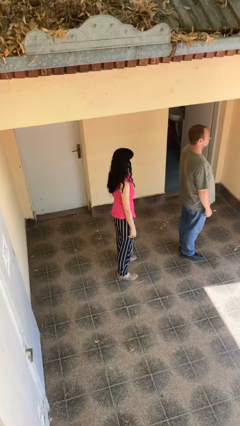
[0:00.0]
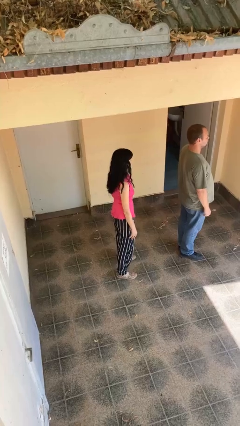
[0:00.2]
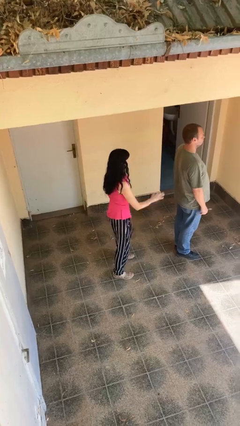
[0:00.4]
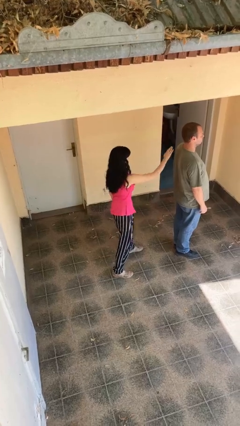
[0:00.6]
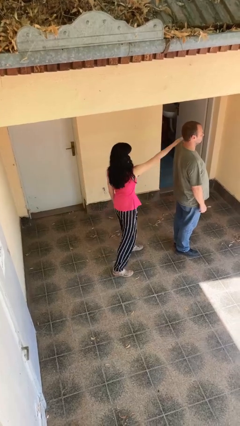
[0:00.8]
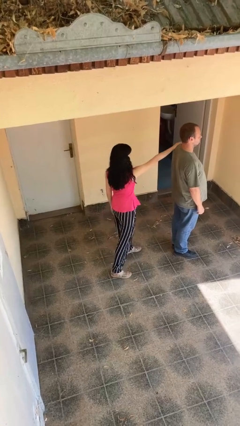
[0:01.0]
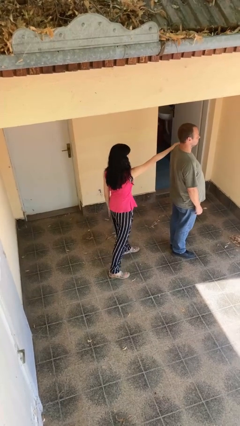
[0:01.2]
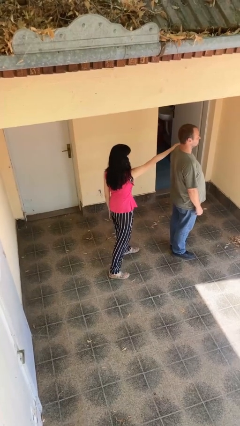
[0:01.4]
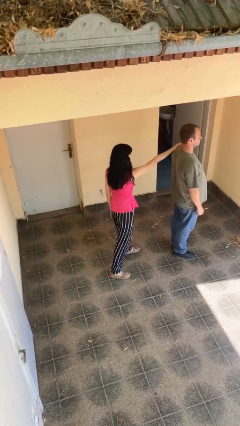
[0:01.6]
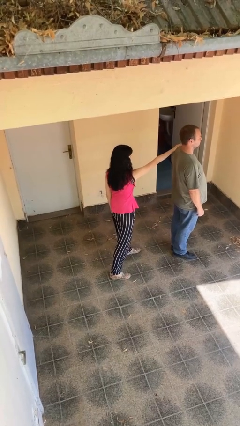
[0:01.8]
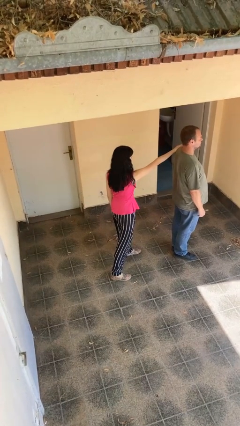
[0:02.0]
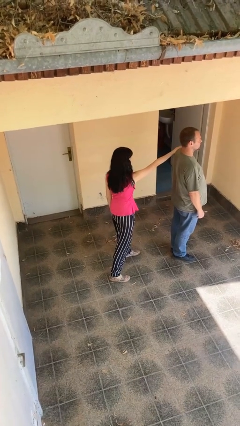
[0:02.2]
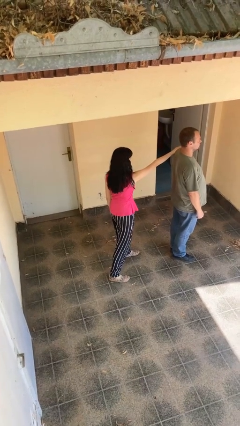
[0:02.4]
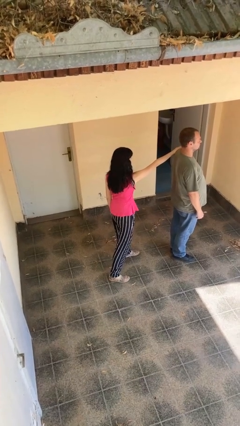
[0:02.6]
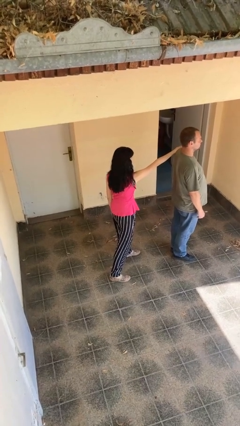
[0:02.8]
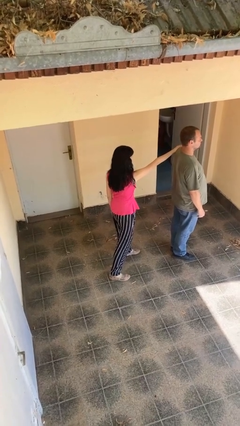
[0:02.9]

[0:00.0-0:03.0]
person grabs person by shoulder

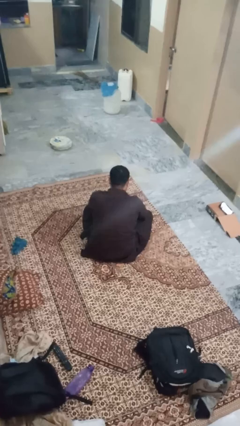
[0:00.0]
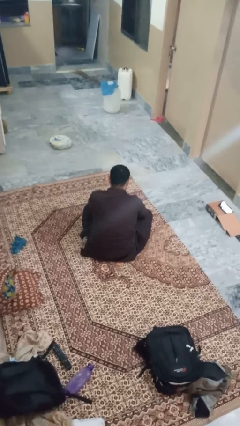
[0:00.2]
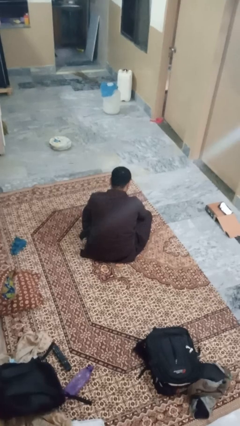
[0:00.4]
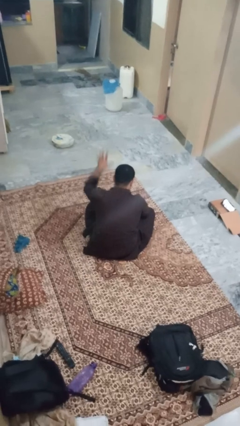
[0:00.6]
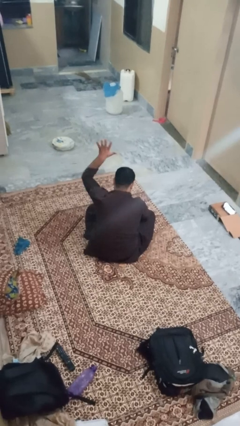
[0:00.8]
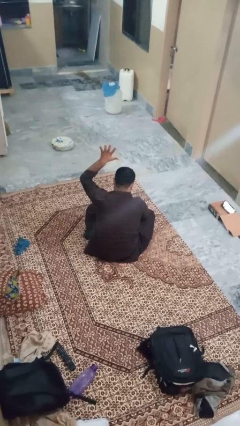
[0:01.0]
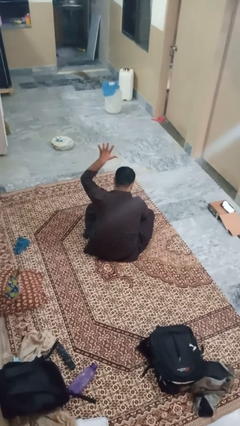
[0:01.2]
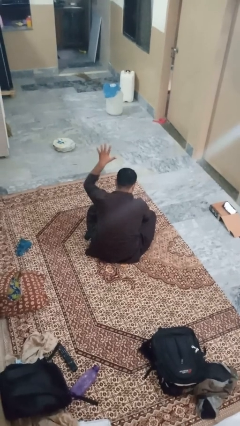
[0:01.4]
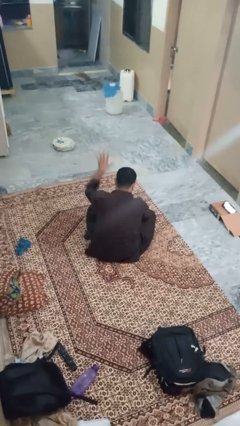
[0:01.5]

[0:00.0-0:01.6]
person gestures number five

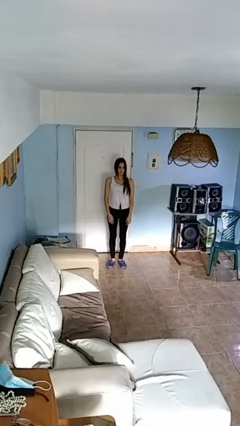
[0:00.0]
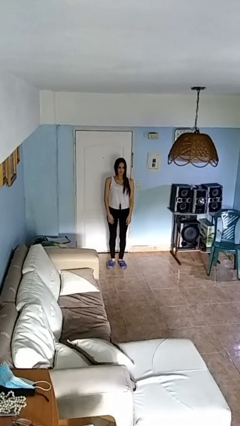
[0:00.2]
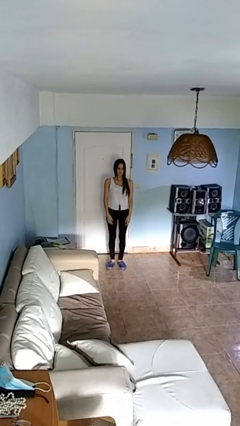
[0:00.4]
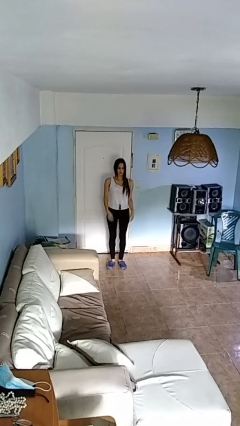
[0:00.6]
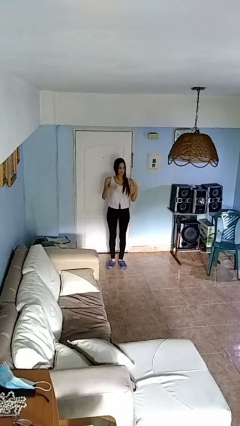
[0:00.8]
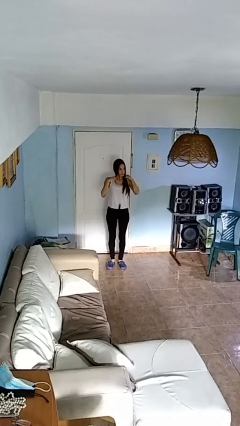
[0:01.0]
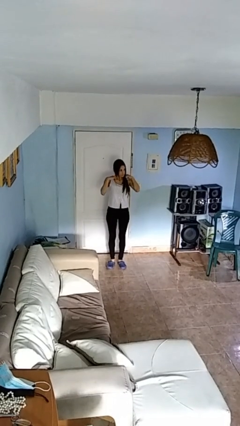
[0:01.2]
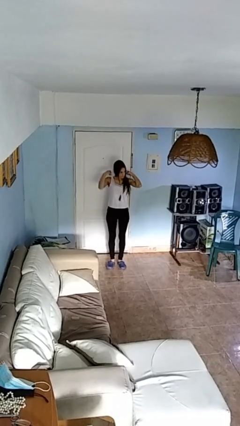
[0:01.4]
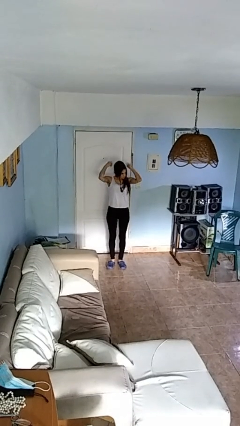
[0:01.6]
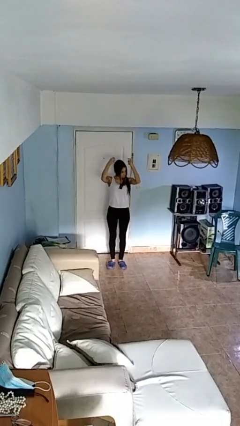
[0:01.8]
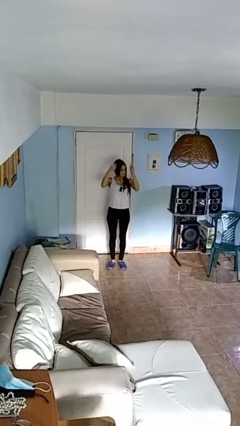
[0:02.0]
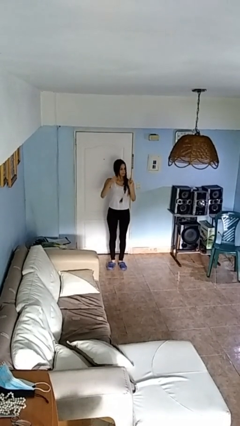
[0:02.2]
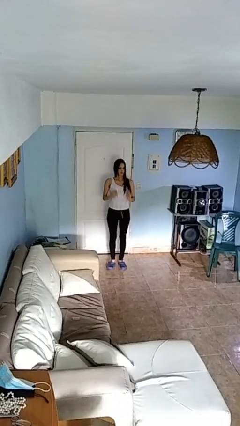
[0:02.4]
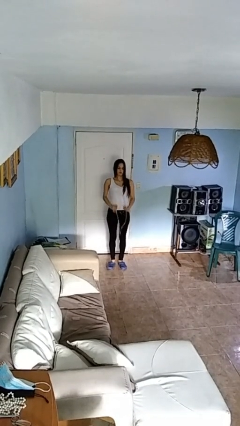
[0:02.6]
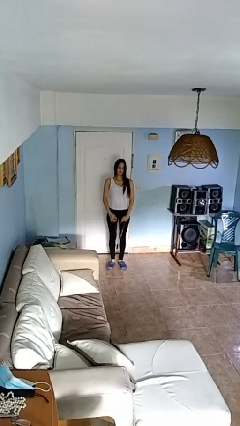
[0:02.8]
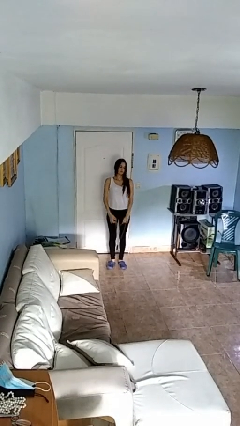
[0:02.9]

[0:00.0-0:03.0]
person takes off necklace

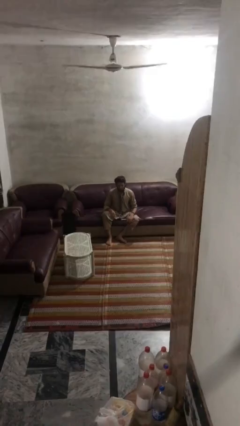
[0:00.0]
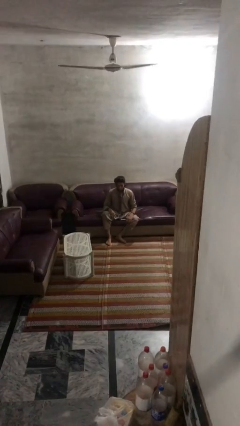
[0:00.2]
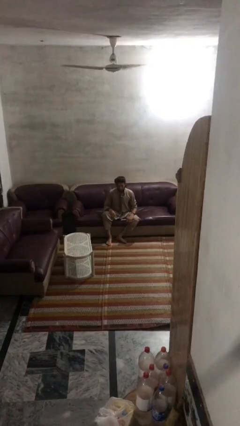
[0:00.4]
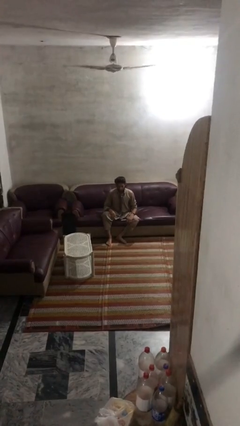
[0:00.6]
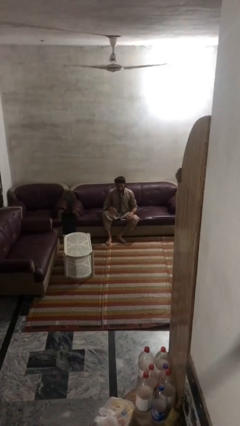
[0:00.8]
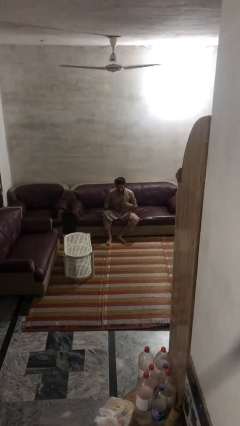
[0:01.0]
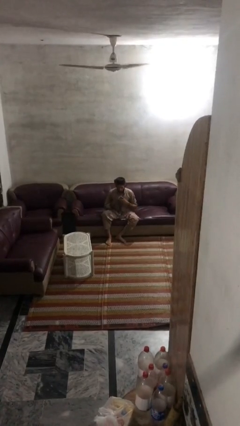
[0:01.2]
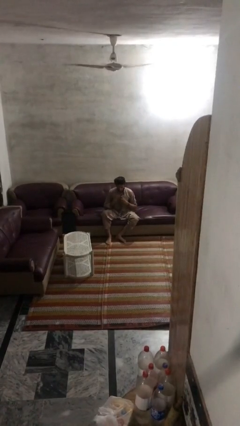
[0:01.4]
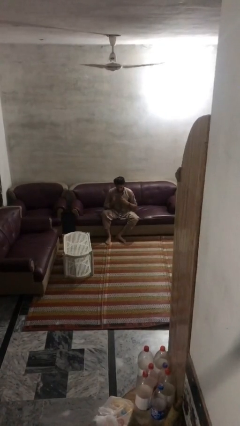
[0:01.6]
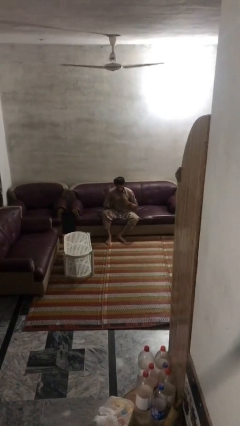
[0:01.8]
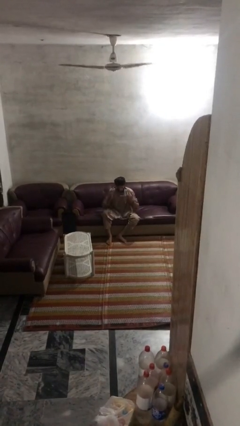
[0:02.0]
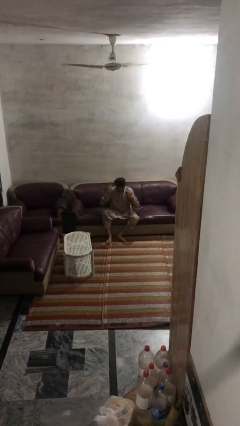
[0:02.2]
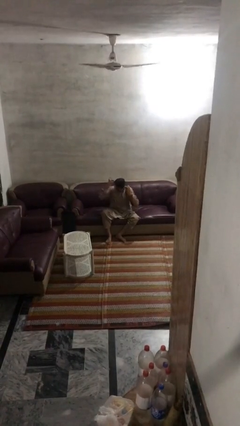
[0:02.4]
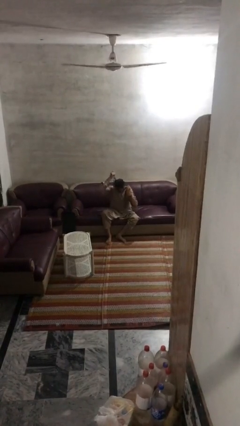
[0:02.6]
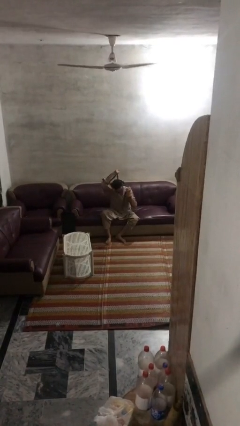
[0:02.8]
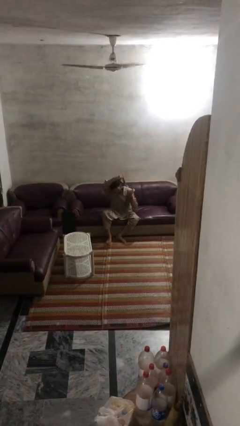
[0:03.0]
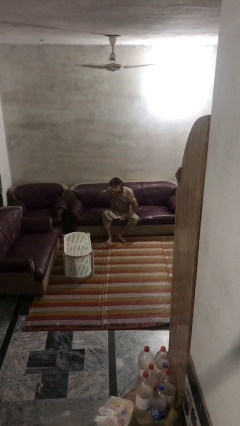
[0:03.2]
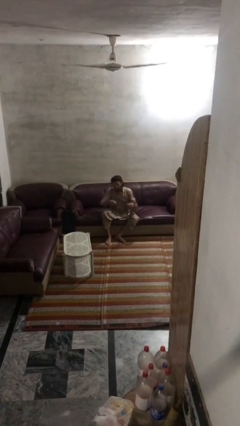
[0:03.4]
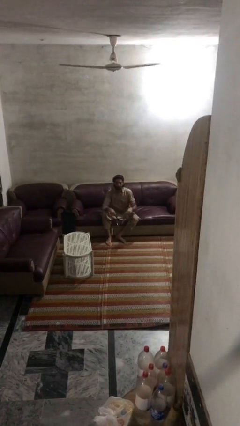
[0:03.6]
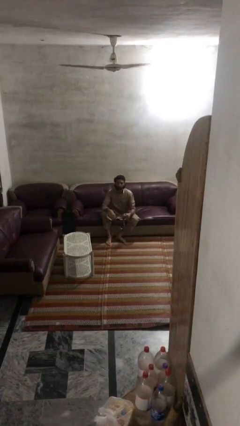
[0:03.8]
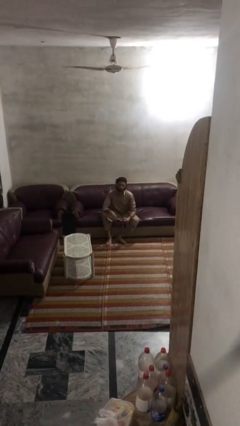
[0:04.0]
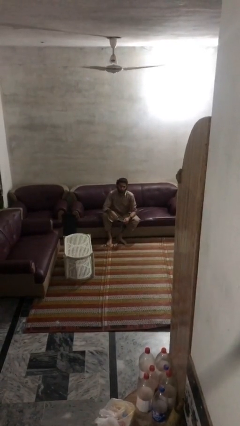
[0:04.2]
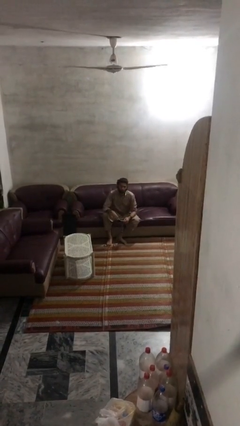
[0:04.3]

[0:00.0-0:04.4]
person takes off necktie

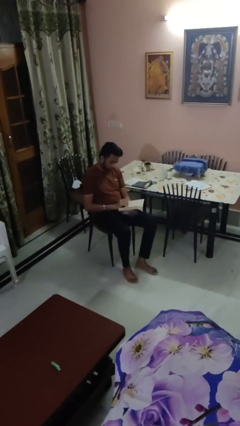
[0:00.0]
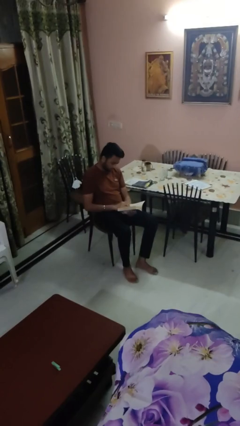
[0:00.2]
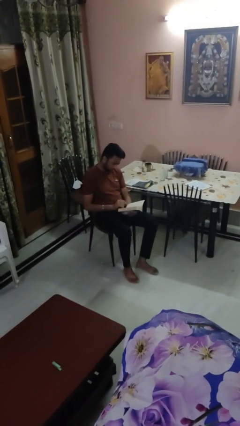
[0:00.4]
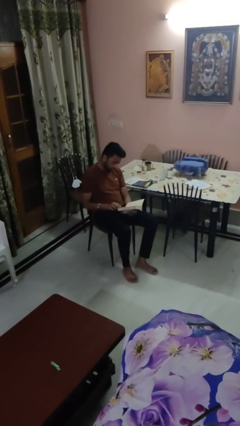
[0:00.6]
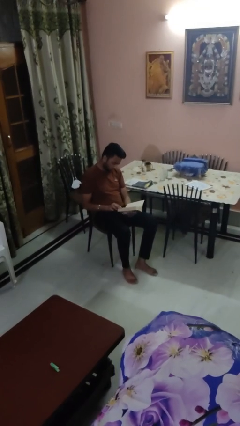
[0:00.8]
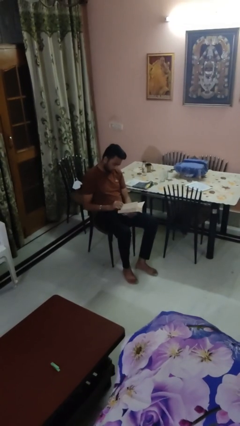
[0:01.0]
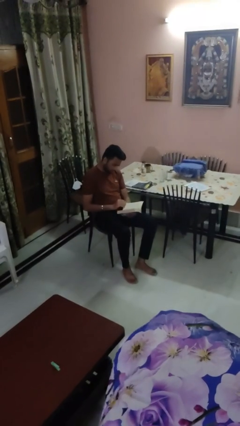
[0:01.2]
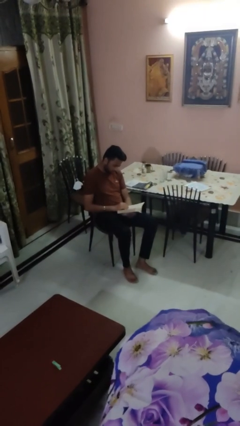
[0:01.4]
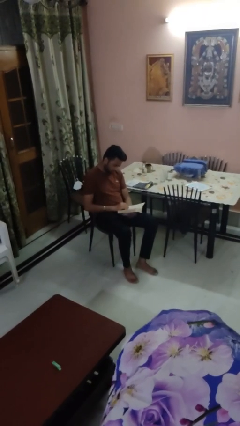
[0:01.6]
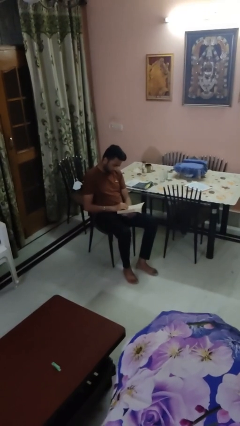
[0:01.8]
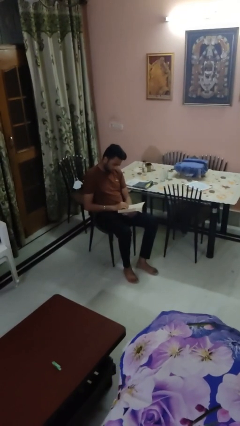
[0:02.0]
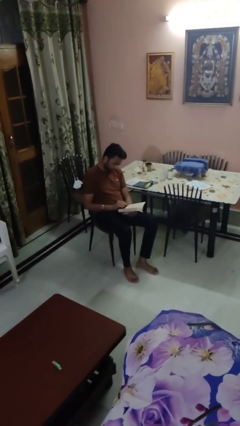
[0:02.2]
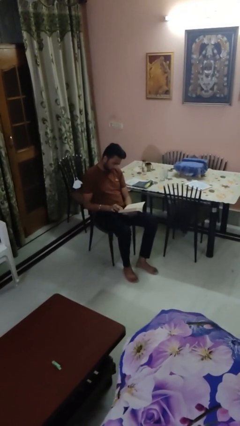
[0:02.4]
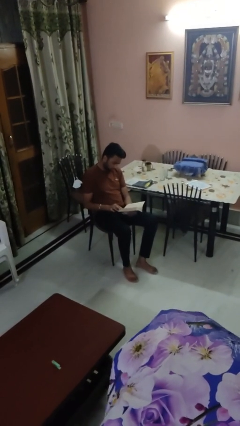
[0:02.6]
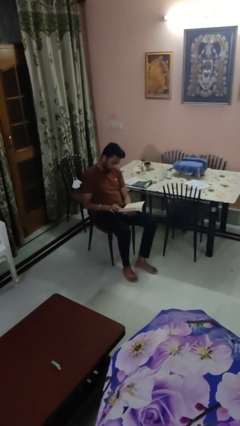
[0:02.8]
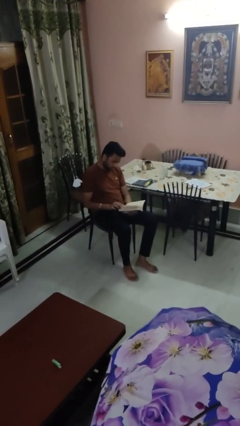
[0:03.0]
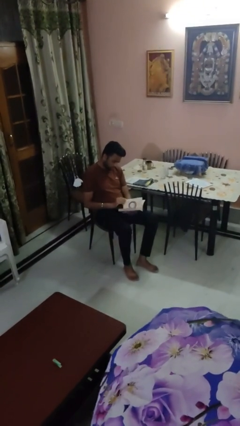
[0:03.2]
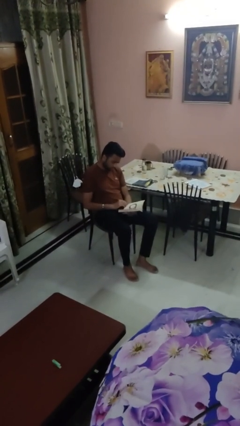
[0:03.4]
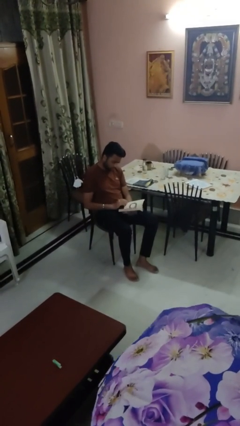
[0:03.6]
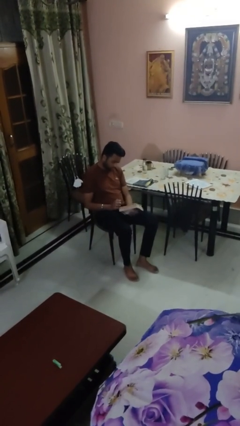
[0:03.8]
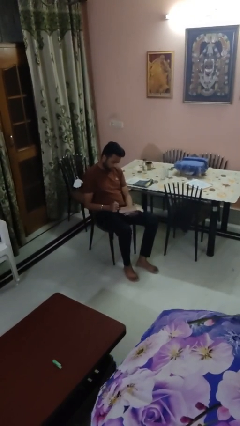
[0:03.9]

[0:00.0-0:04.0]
person reads book

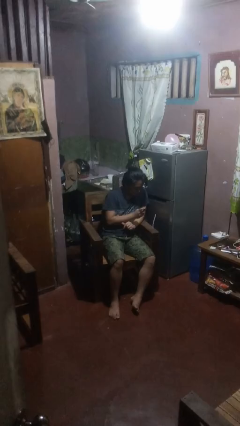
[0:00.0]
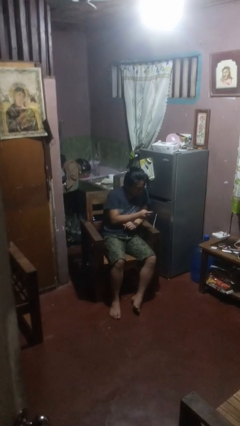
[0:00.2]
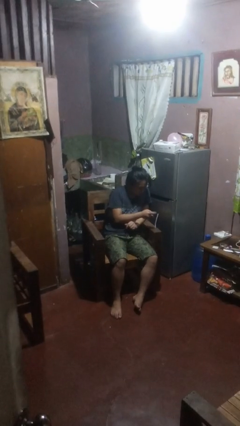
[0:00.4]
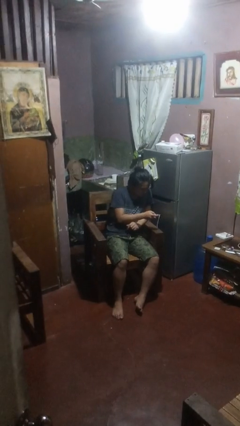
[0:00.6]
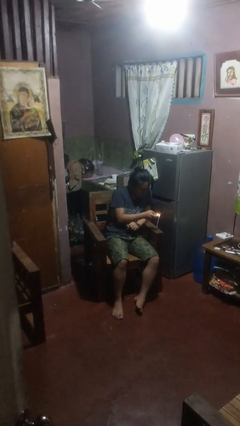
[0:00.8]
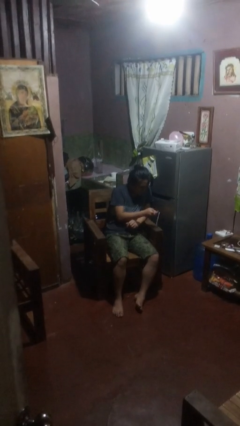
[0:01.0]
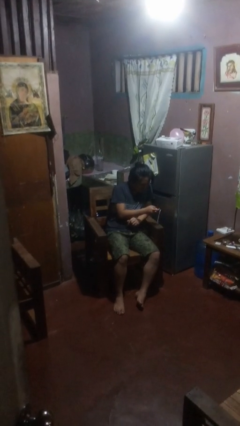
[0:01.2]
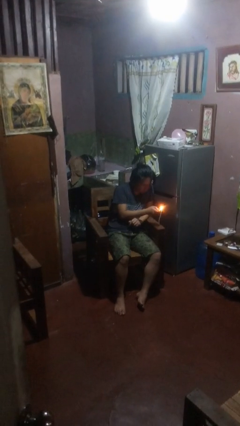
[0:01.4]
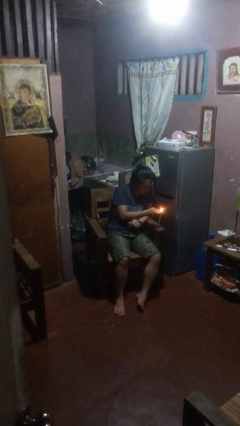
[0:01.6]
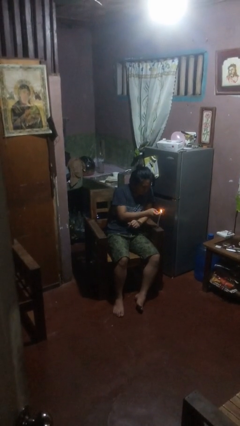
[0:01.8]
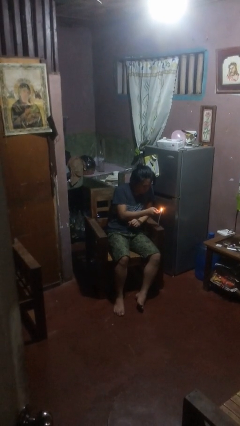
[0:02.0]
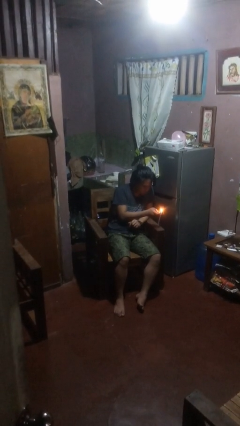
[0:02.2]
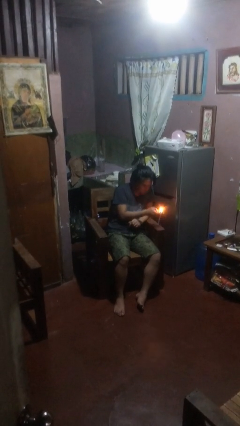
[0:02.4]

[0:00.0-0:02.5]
person lights candle
